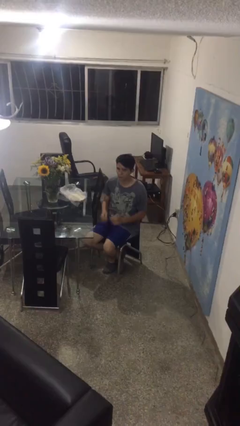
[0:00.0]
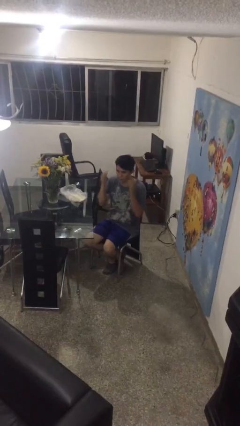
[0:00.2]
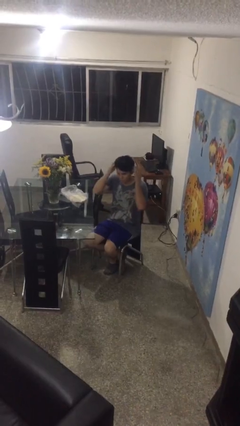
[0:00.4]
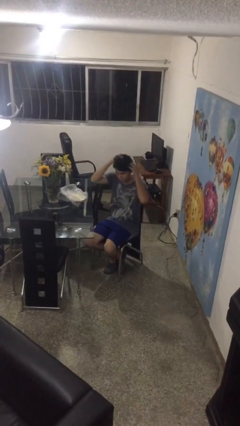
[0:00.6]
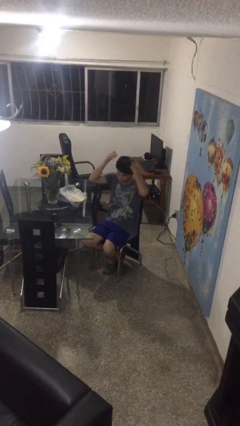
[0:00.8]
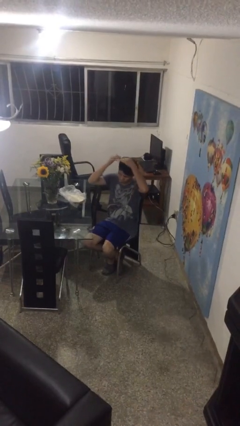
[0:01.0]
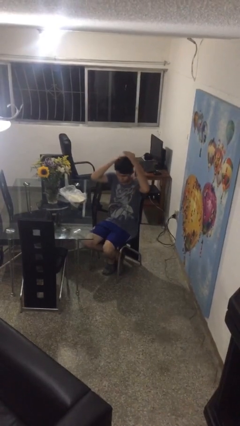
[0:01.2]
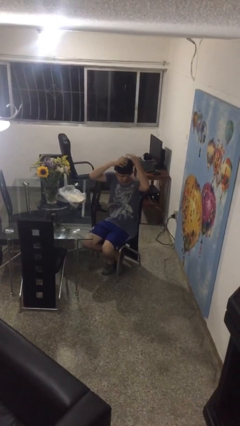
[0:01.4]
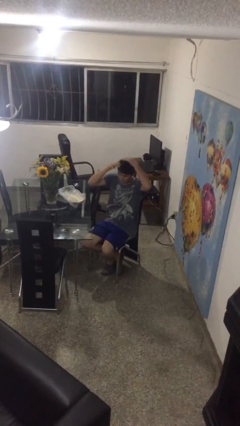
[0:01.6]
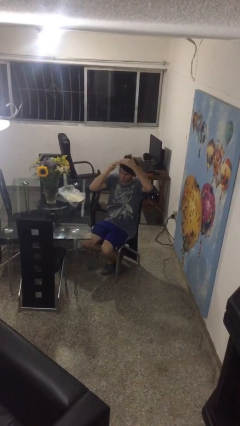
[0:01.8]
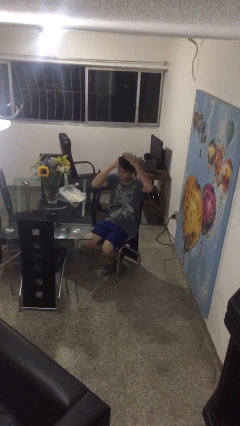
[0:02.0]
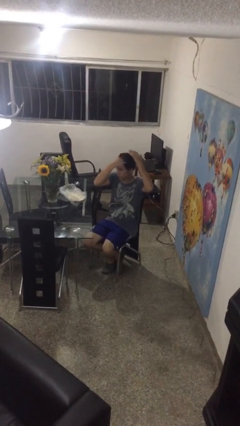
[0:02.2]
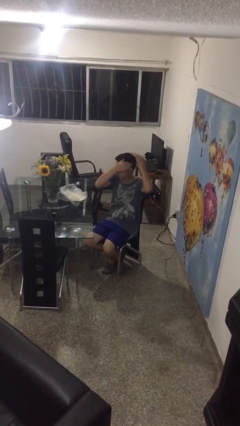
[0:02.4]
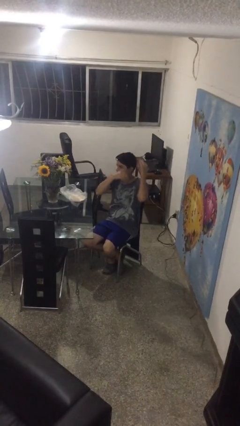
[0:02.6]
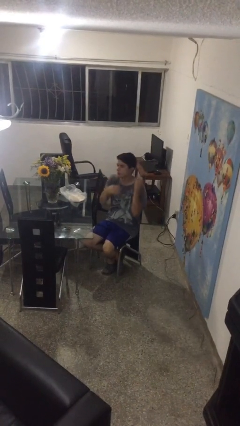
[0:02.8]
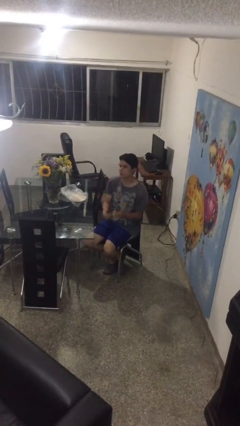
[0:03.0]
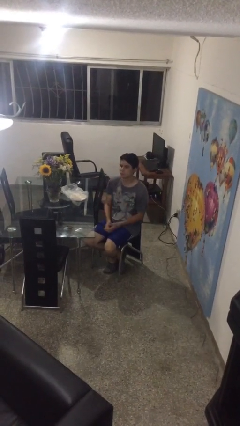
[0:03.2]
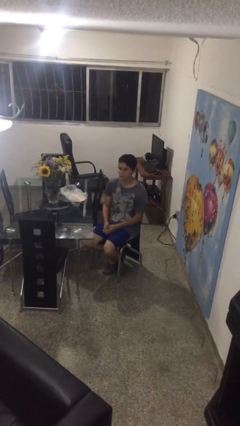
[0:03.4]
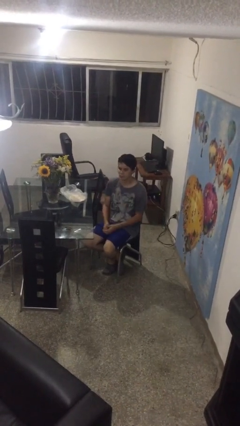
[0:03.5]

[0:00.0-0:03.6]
person strokes hair

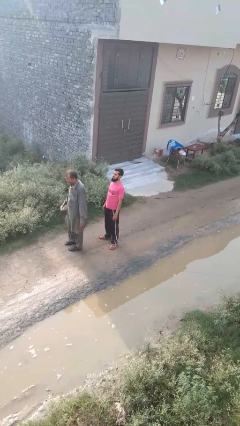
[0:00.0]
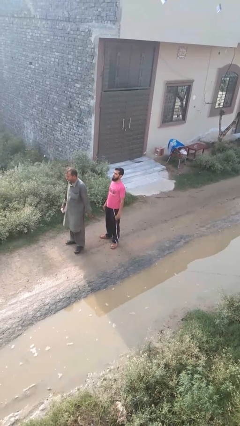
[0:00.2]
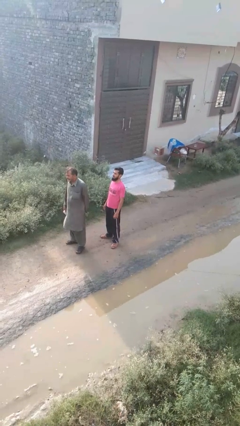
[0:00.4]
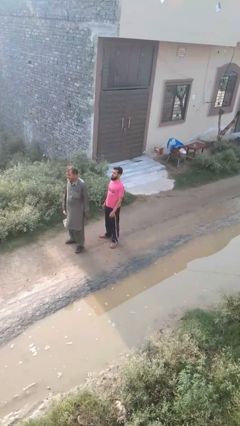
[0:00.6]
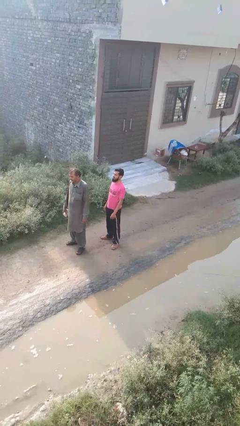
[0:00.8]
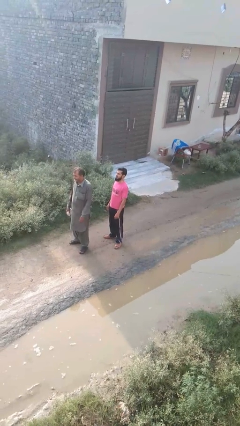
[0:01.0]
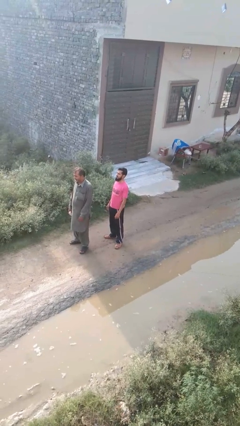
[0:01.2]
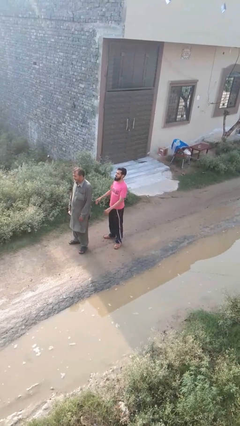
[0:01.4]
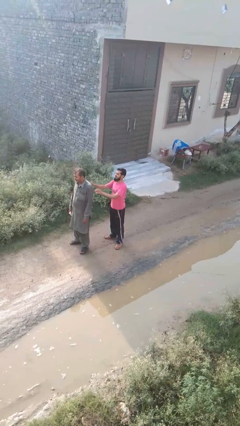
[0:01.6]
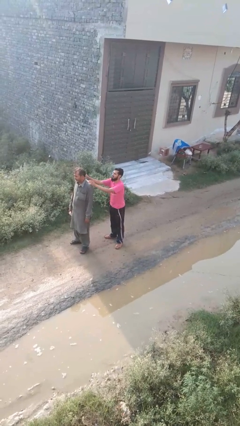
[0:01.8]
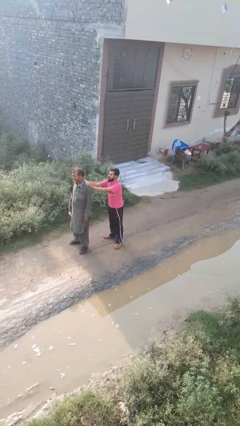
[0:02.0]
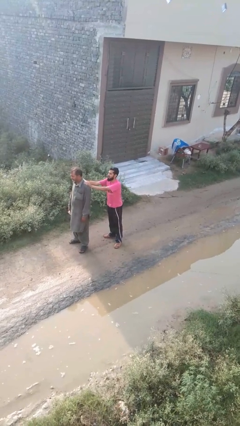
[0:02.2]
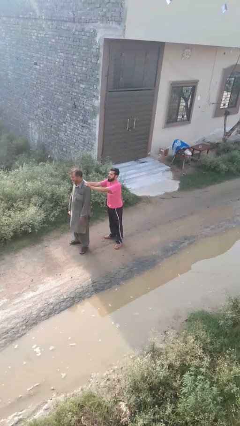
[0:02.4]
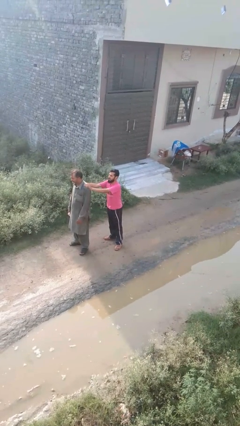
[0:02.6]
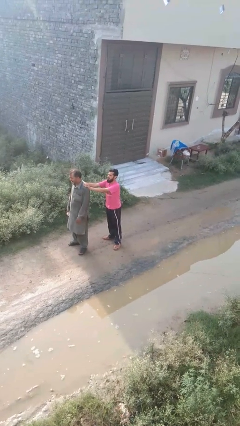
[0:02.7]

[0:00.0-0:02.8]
person grabs person by shoulder

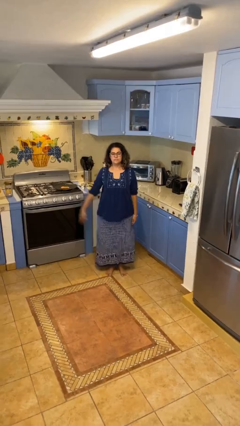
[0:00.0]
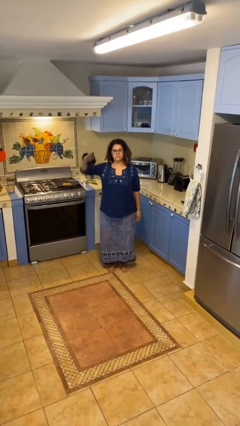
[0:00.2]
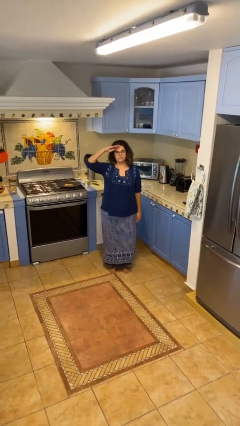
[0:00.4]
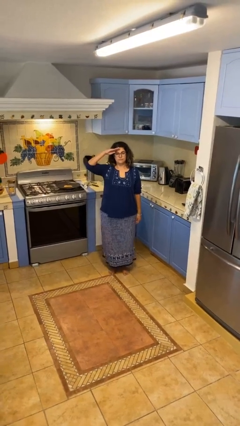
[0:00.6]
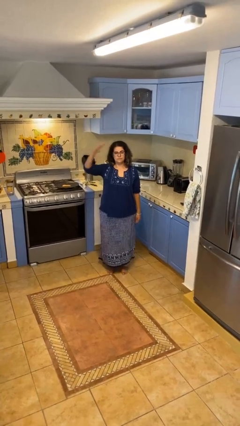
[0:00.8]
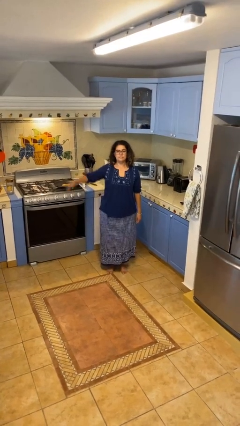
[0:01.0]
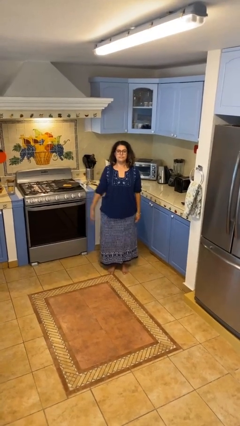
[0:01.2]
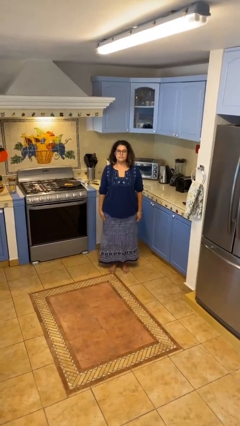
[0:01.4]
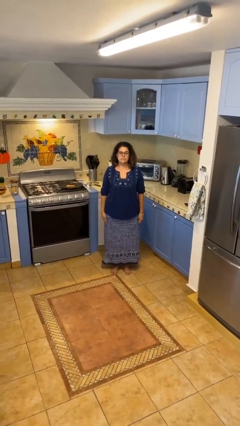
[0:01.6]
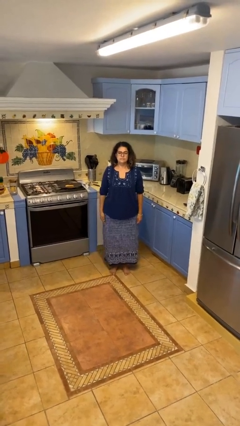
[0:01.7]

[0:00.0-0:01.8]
person salutes

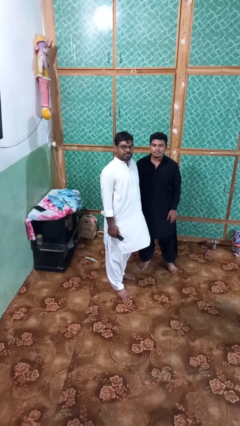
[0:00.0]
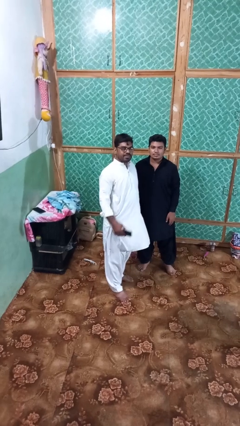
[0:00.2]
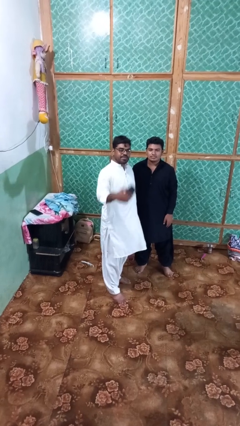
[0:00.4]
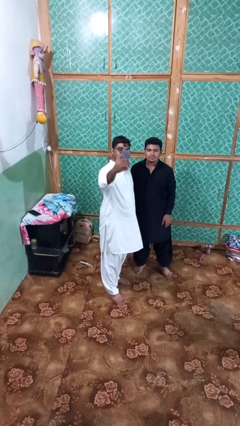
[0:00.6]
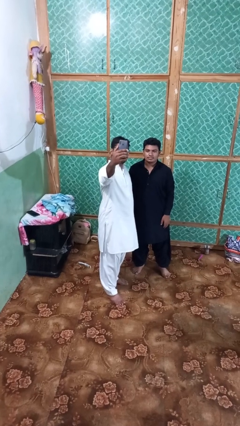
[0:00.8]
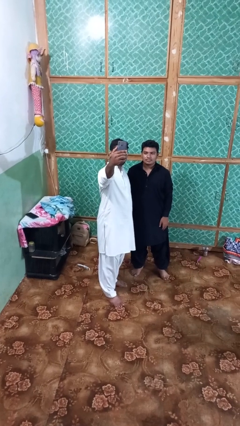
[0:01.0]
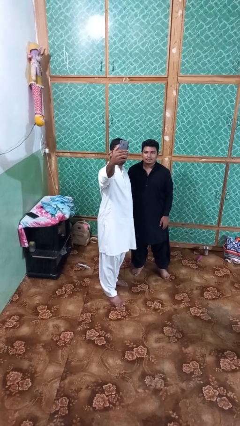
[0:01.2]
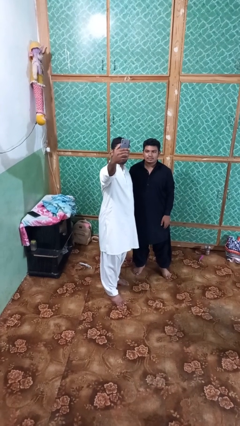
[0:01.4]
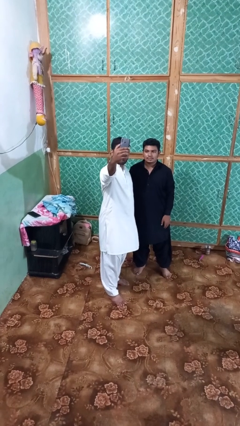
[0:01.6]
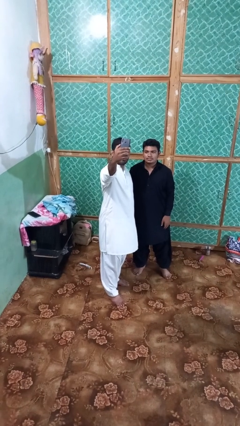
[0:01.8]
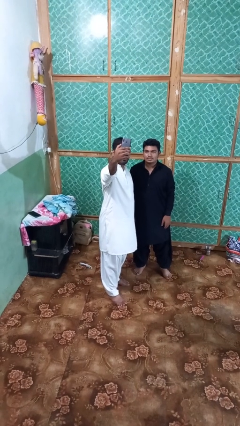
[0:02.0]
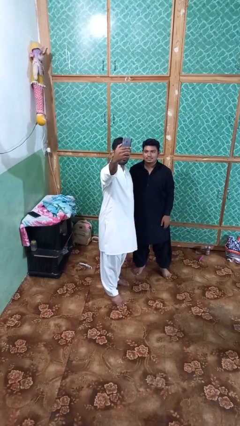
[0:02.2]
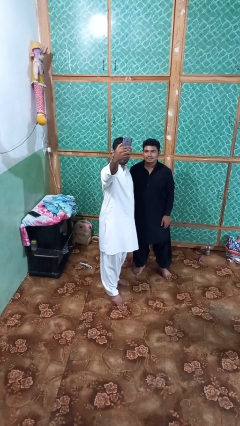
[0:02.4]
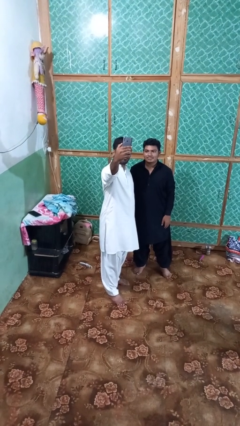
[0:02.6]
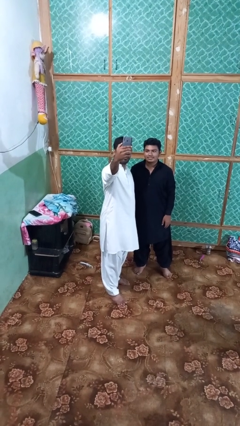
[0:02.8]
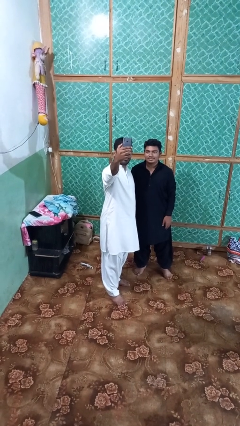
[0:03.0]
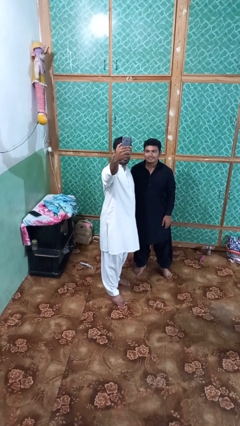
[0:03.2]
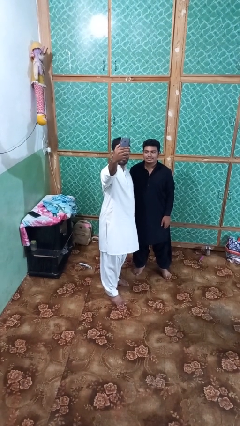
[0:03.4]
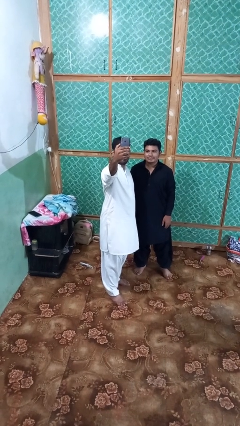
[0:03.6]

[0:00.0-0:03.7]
person takes selfie with person

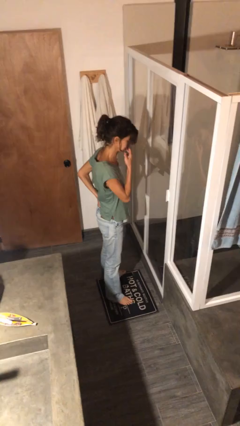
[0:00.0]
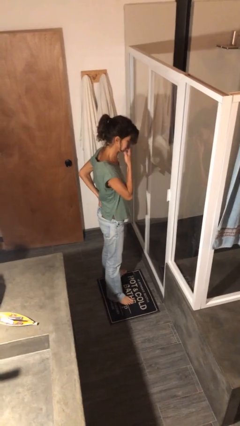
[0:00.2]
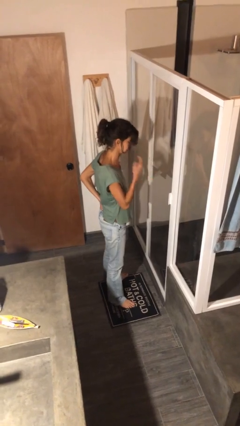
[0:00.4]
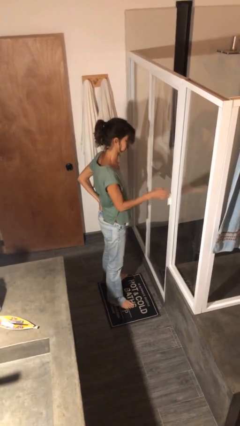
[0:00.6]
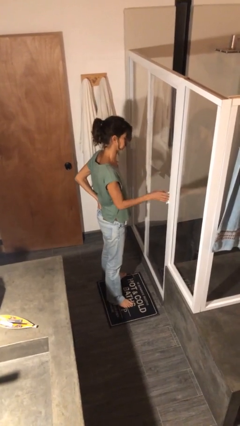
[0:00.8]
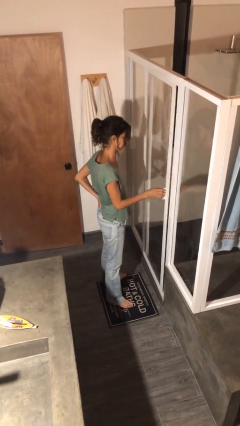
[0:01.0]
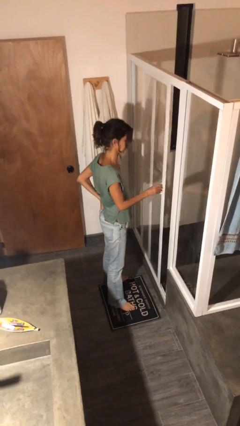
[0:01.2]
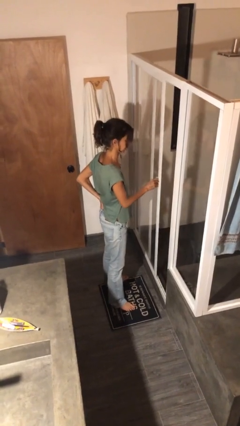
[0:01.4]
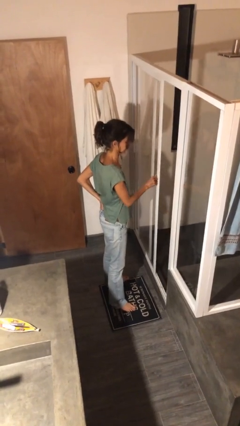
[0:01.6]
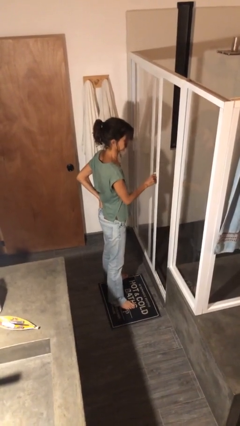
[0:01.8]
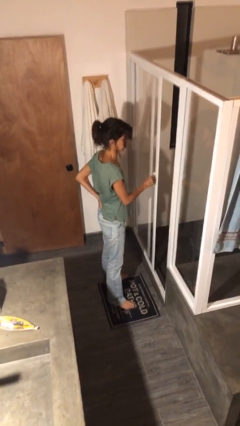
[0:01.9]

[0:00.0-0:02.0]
person opens sliding door

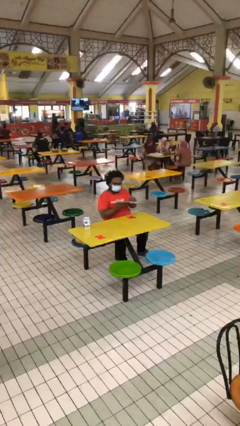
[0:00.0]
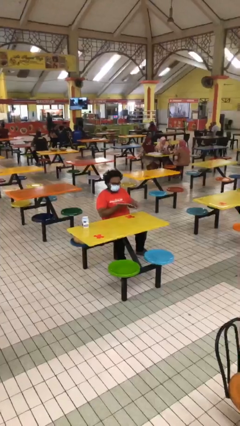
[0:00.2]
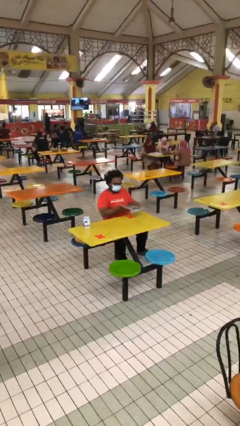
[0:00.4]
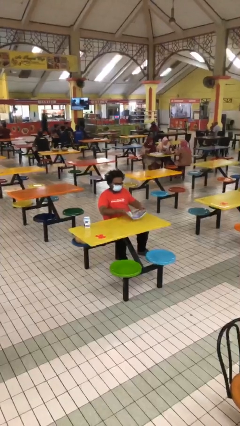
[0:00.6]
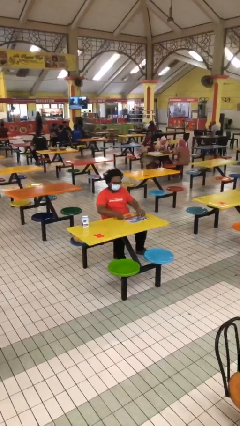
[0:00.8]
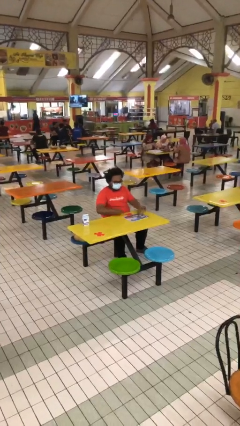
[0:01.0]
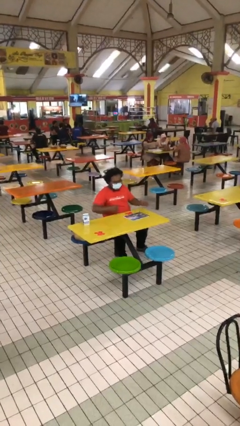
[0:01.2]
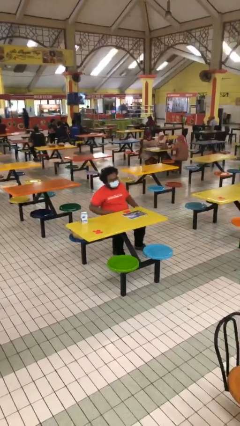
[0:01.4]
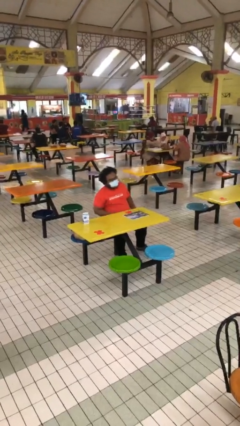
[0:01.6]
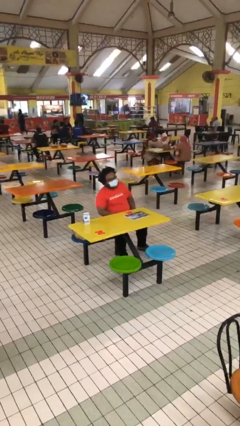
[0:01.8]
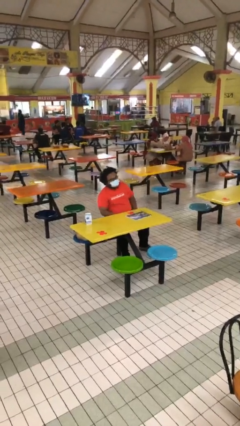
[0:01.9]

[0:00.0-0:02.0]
person puts down object on table

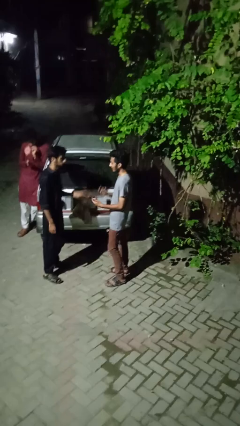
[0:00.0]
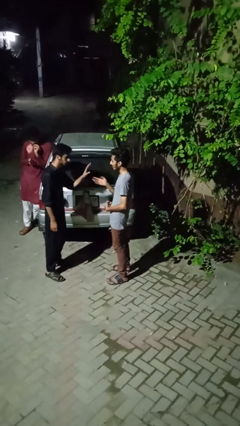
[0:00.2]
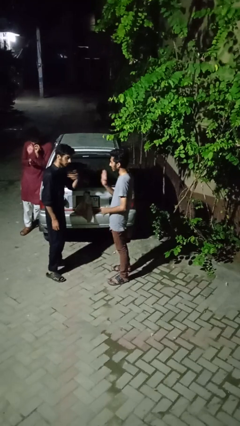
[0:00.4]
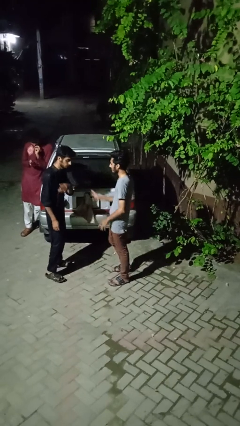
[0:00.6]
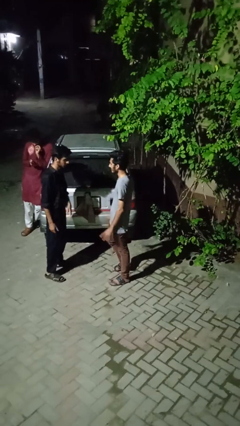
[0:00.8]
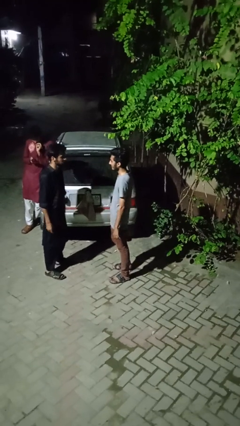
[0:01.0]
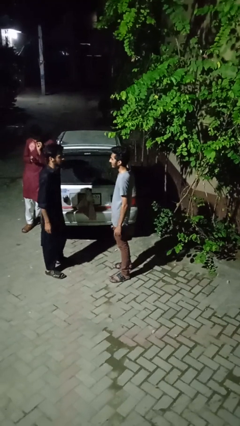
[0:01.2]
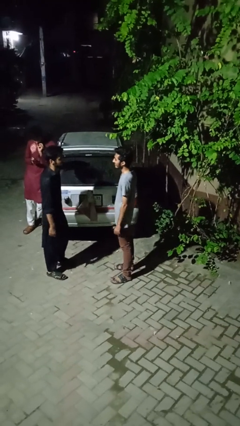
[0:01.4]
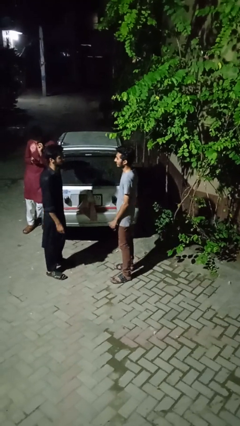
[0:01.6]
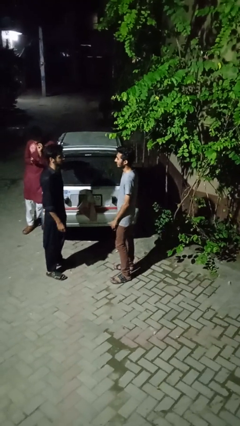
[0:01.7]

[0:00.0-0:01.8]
person talks to person
